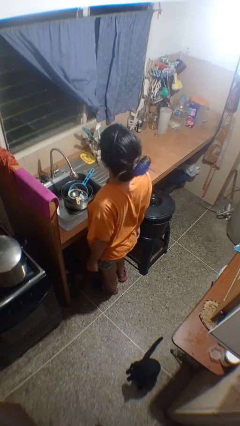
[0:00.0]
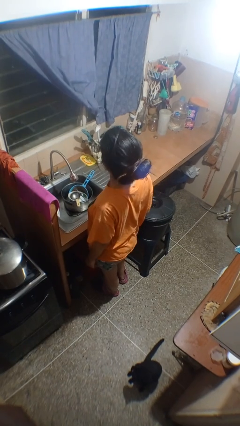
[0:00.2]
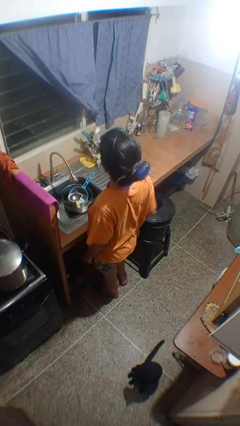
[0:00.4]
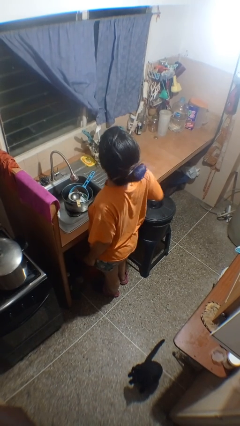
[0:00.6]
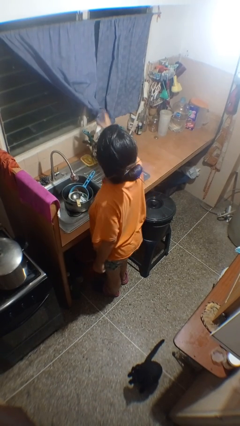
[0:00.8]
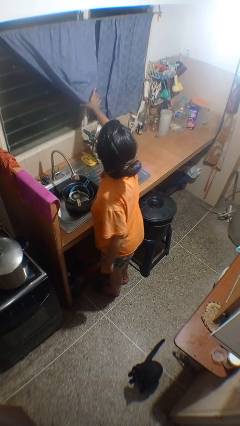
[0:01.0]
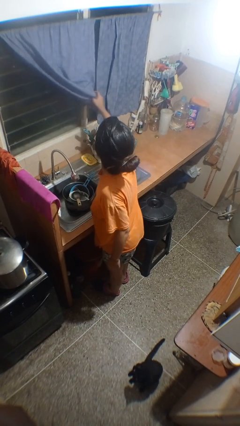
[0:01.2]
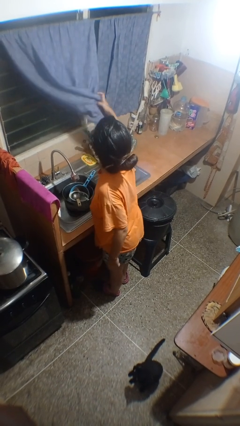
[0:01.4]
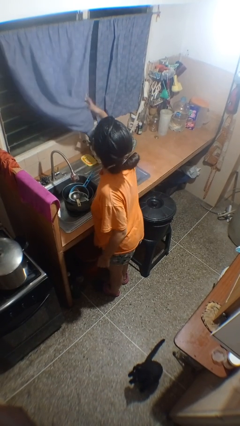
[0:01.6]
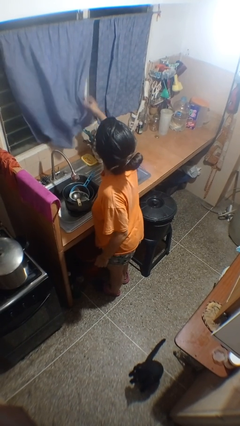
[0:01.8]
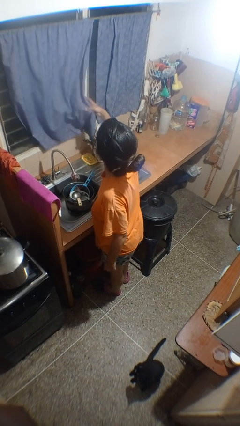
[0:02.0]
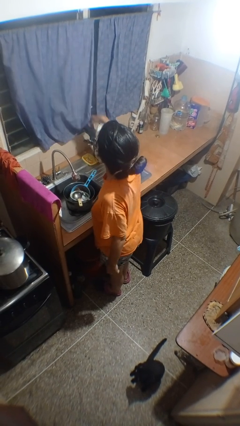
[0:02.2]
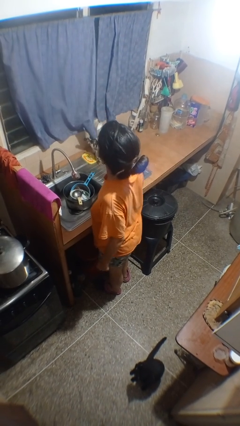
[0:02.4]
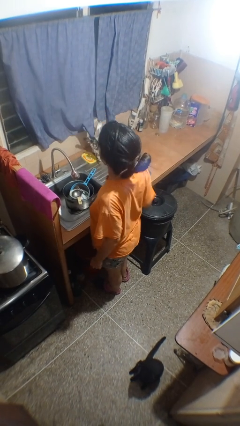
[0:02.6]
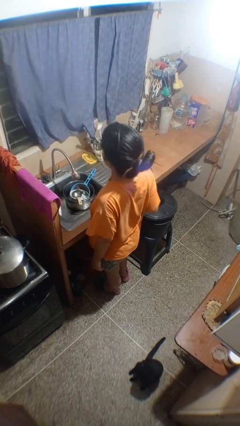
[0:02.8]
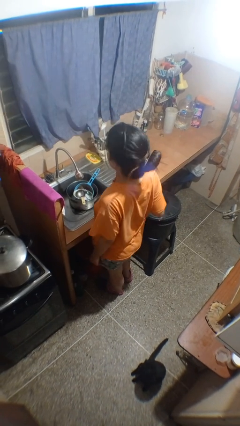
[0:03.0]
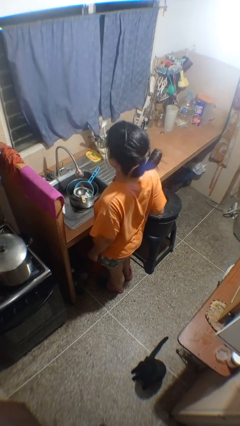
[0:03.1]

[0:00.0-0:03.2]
person closes curtains

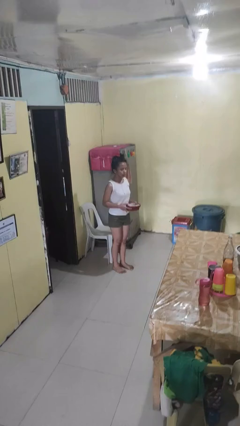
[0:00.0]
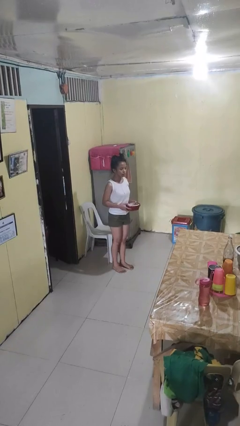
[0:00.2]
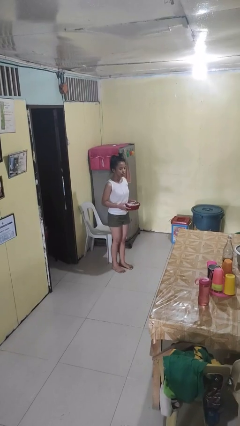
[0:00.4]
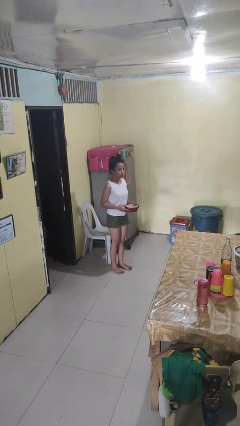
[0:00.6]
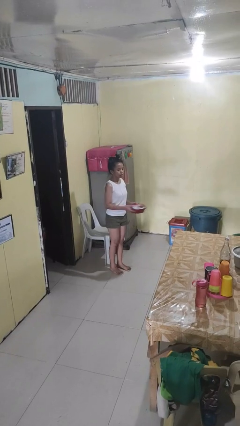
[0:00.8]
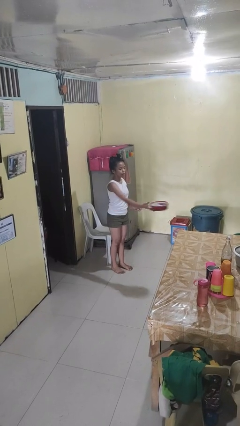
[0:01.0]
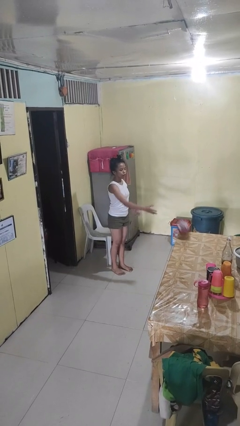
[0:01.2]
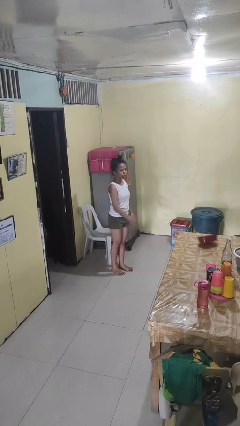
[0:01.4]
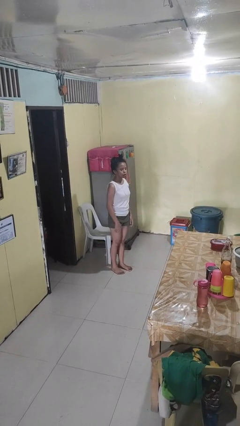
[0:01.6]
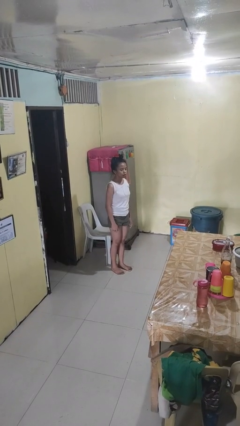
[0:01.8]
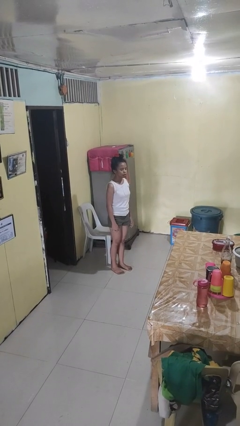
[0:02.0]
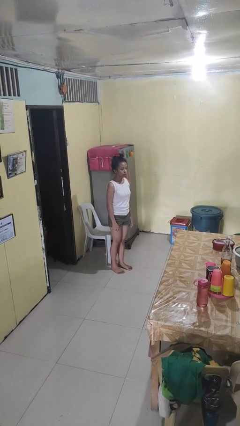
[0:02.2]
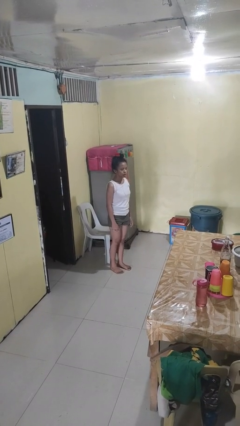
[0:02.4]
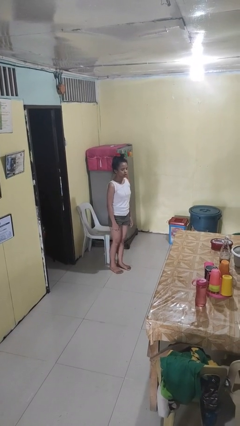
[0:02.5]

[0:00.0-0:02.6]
person throws object on table

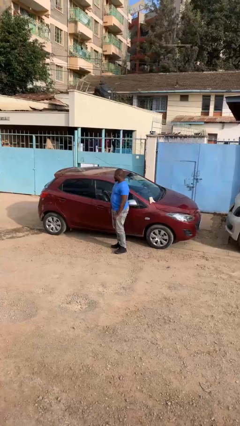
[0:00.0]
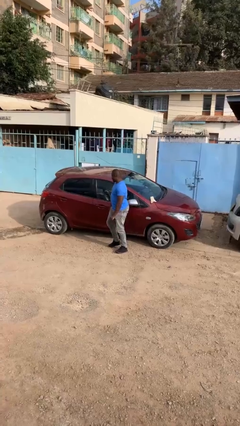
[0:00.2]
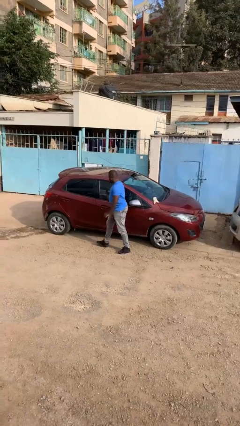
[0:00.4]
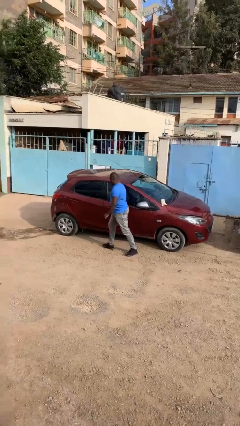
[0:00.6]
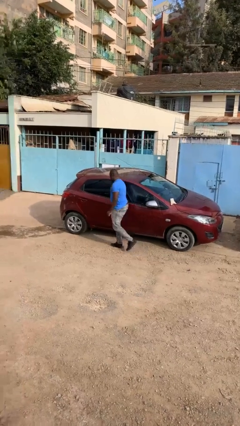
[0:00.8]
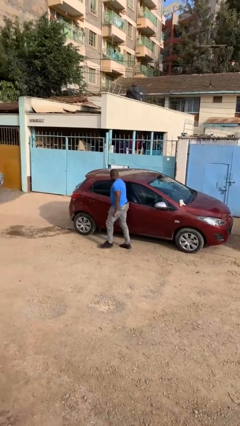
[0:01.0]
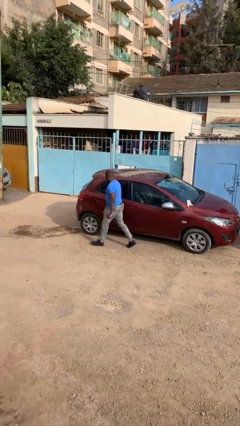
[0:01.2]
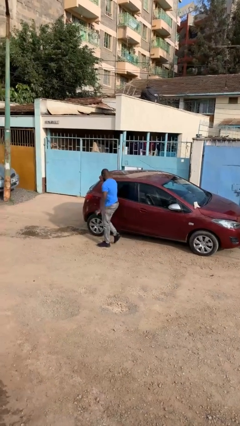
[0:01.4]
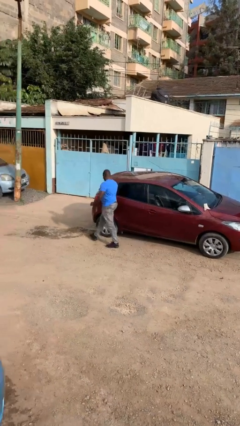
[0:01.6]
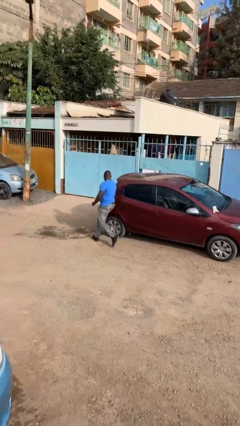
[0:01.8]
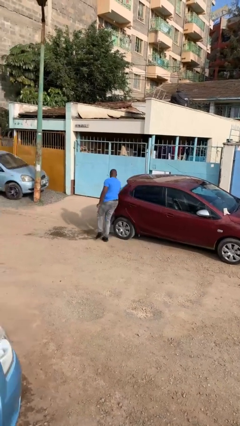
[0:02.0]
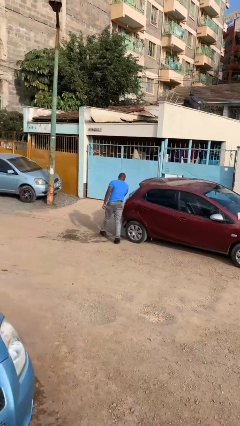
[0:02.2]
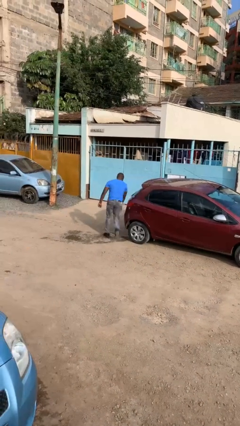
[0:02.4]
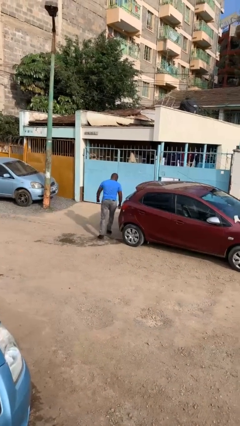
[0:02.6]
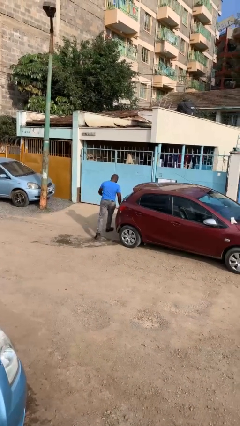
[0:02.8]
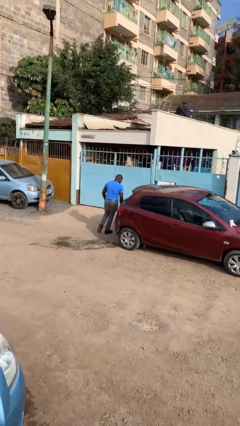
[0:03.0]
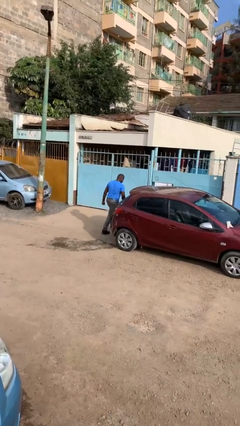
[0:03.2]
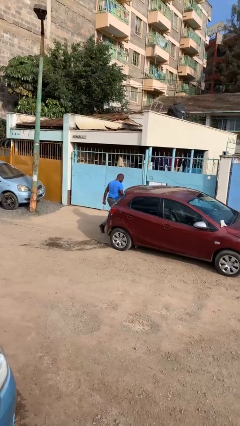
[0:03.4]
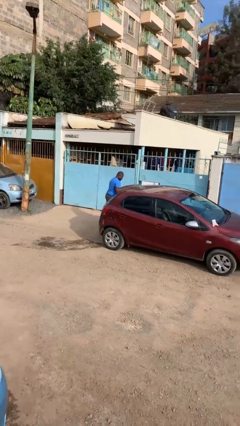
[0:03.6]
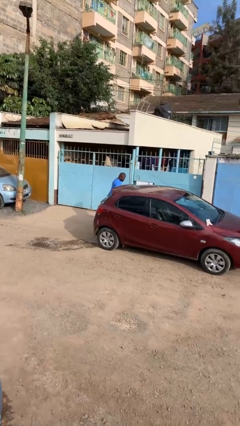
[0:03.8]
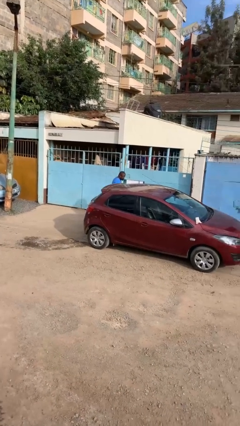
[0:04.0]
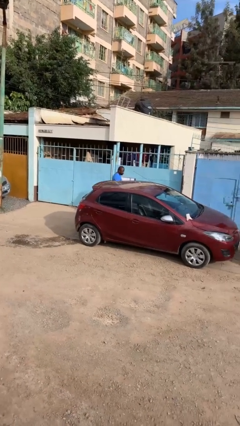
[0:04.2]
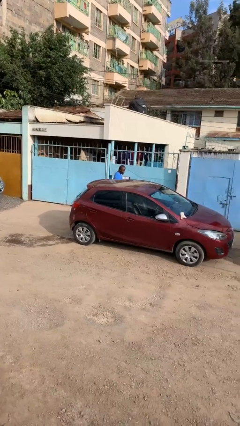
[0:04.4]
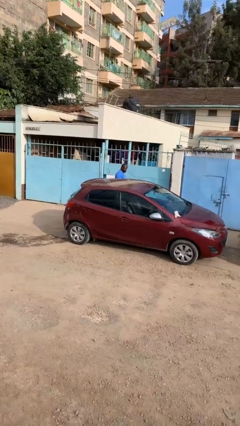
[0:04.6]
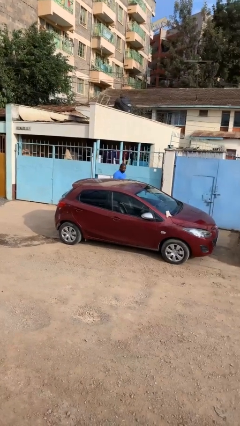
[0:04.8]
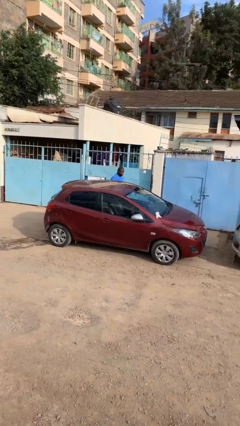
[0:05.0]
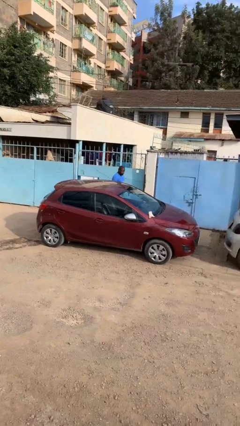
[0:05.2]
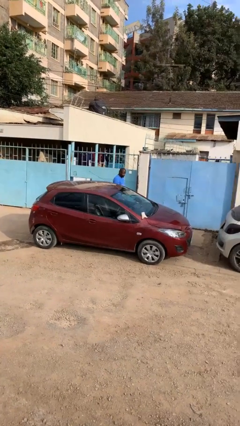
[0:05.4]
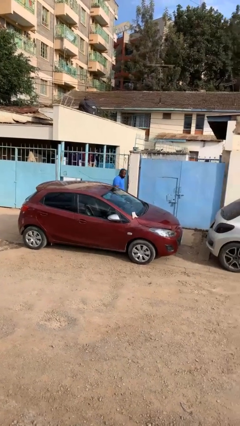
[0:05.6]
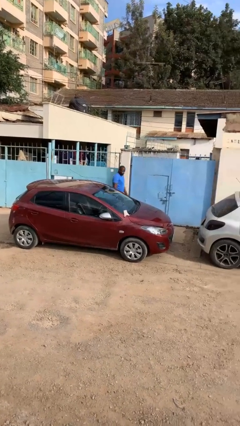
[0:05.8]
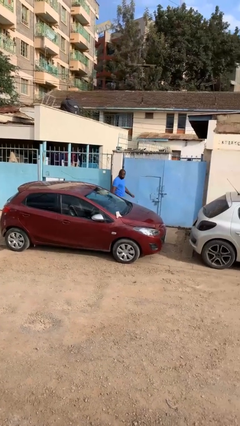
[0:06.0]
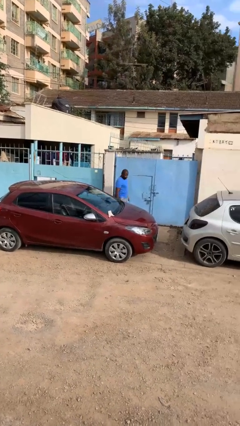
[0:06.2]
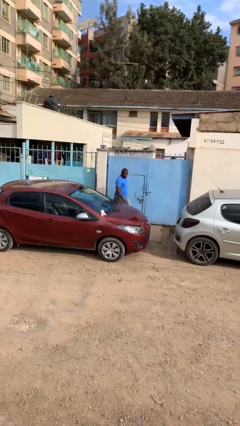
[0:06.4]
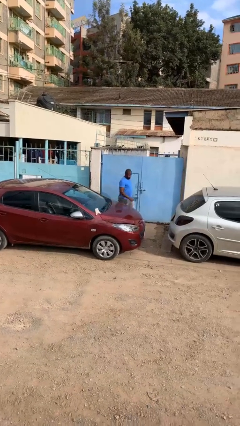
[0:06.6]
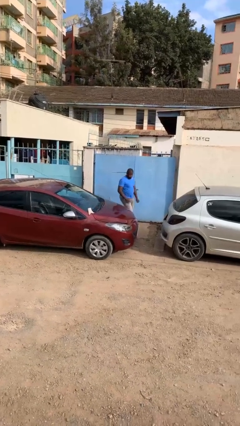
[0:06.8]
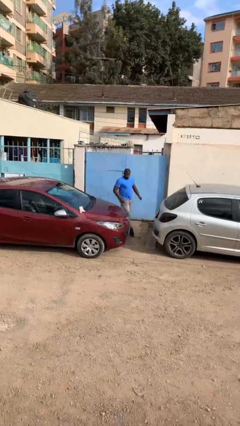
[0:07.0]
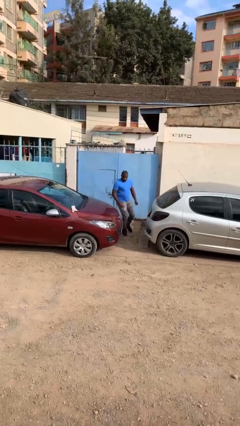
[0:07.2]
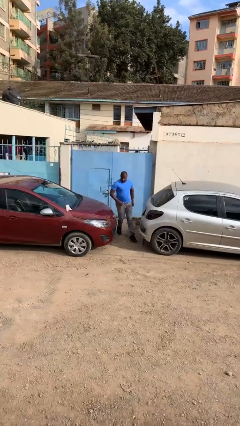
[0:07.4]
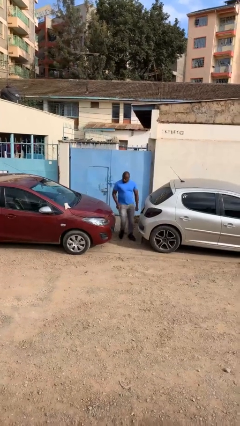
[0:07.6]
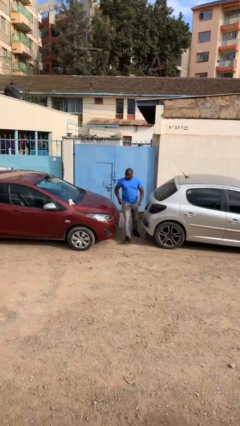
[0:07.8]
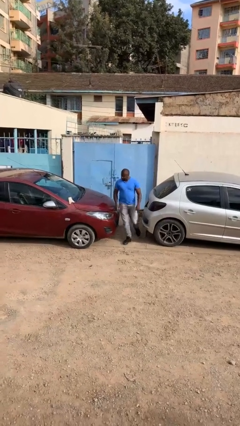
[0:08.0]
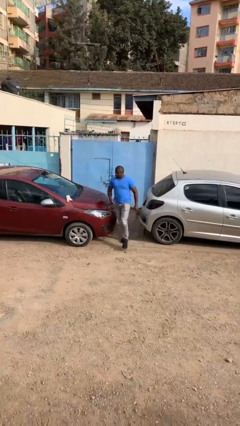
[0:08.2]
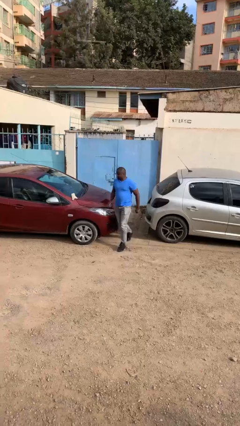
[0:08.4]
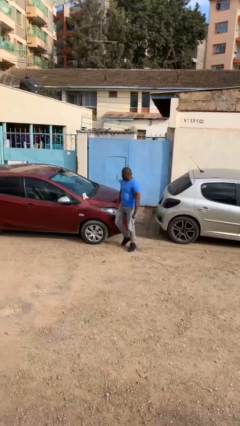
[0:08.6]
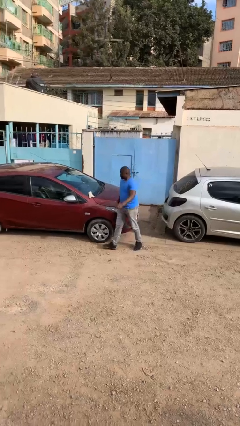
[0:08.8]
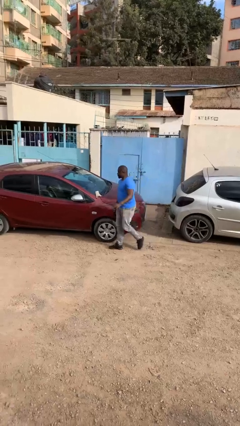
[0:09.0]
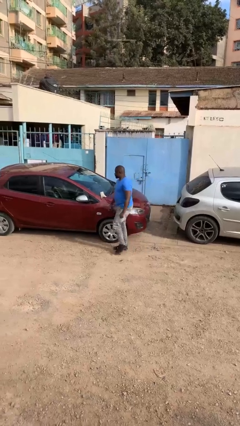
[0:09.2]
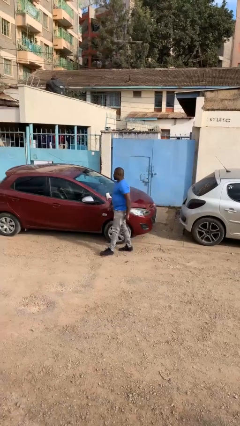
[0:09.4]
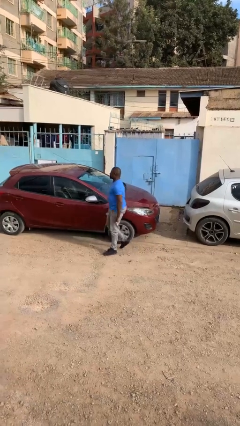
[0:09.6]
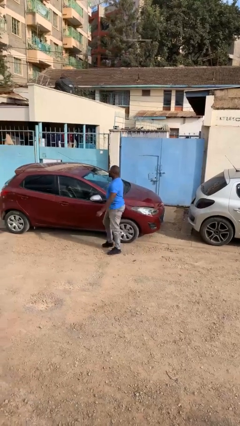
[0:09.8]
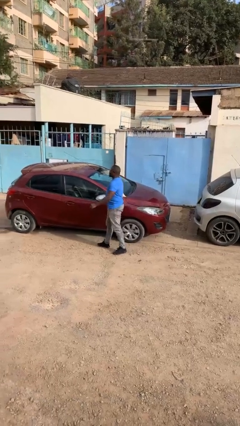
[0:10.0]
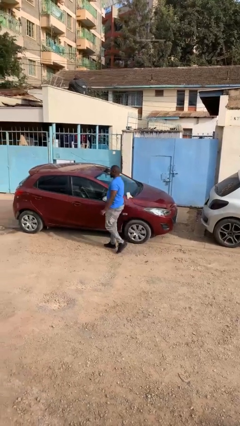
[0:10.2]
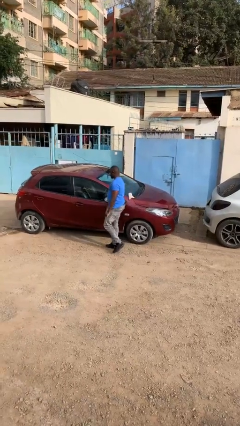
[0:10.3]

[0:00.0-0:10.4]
person walks around car

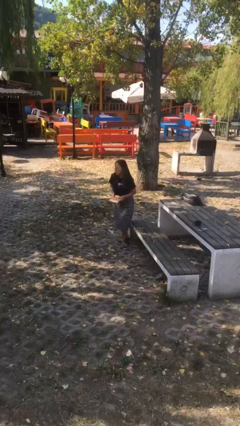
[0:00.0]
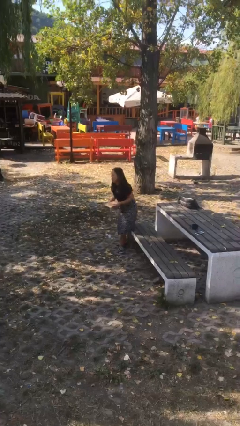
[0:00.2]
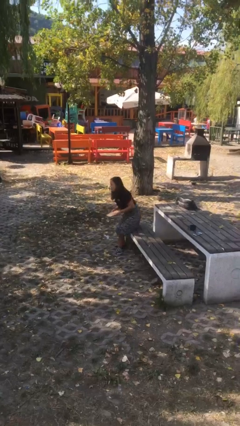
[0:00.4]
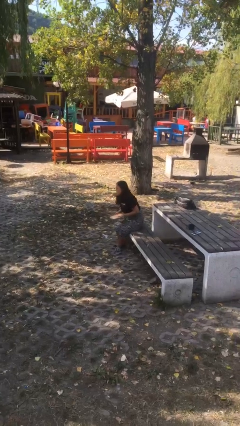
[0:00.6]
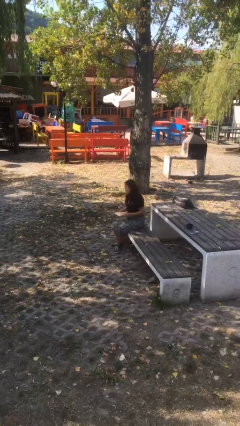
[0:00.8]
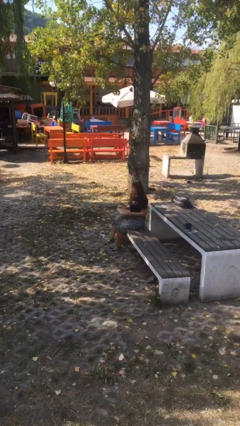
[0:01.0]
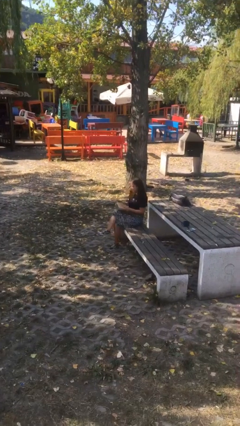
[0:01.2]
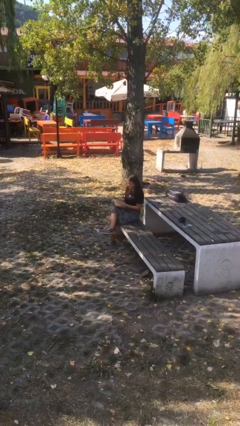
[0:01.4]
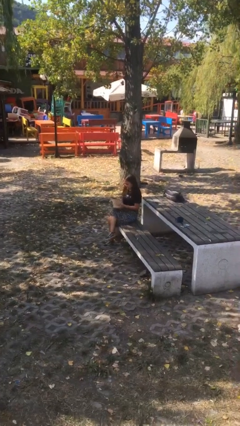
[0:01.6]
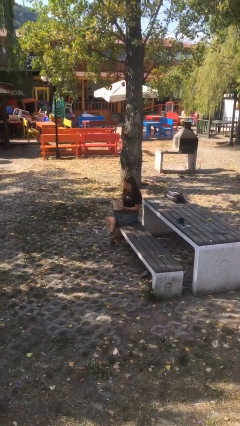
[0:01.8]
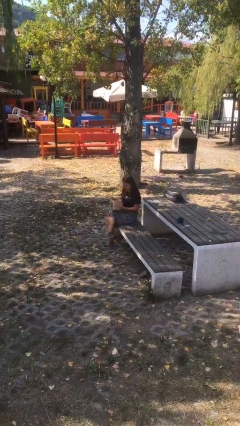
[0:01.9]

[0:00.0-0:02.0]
person sits down
